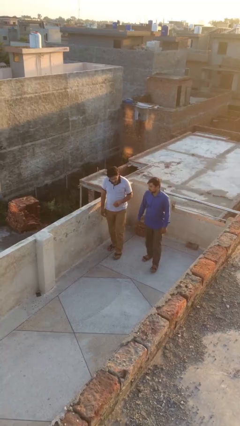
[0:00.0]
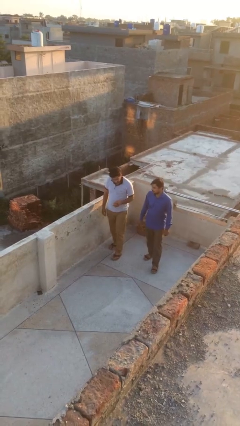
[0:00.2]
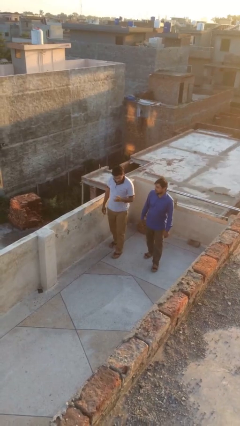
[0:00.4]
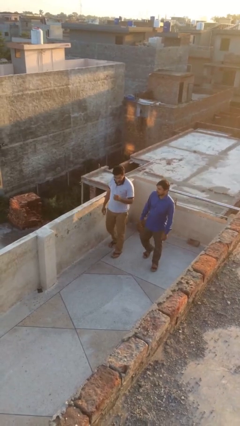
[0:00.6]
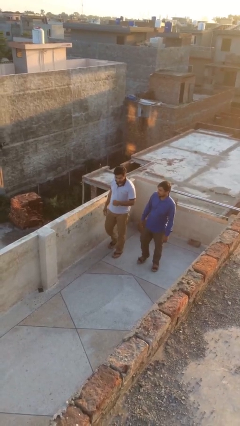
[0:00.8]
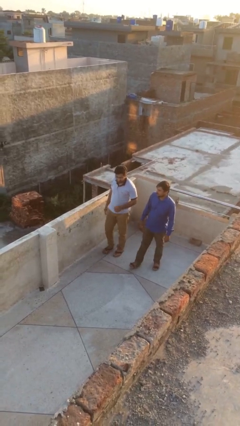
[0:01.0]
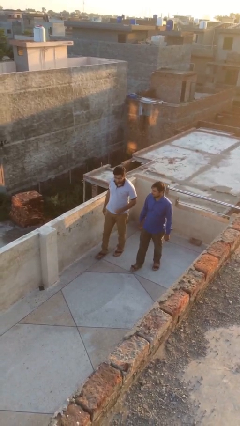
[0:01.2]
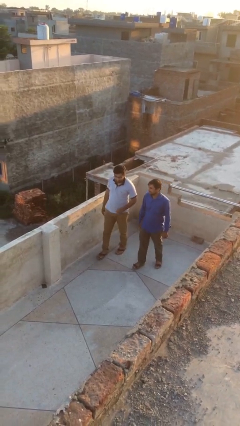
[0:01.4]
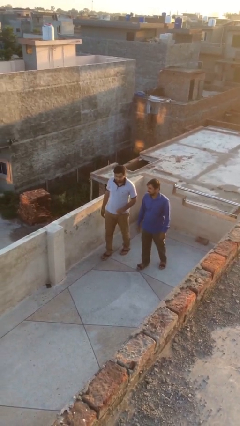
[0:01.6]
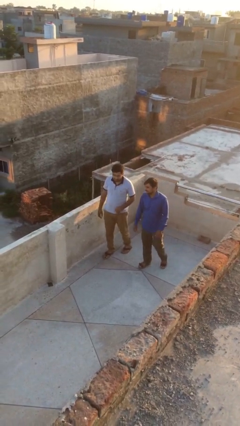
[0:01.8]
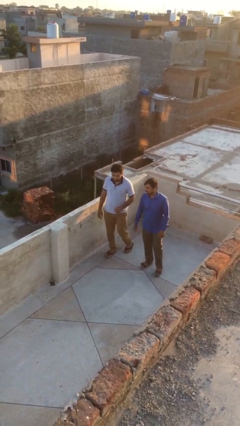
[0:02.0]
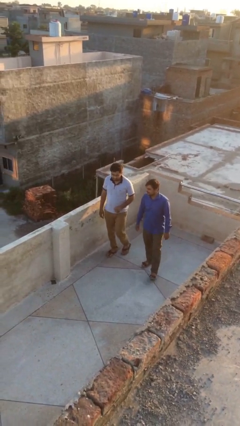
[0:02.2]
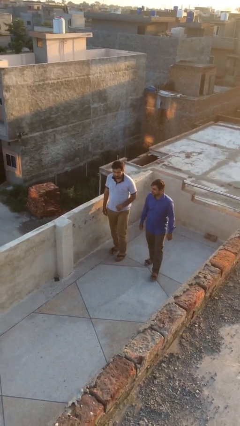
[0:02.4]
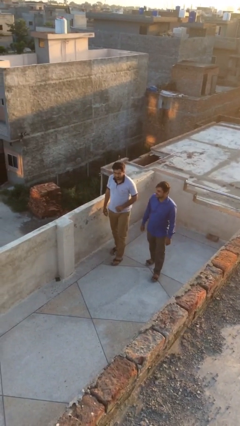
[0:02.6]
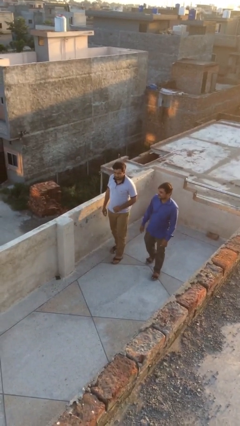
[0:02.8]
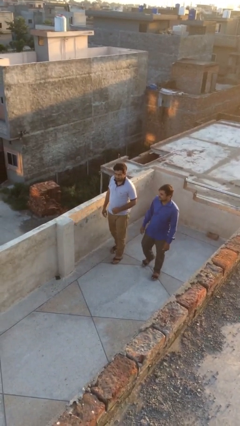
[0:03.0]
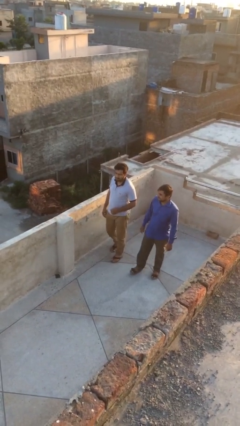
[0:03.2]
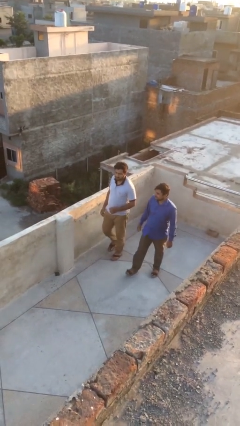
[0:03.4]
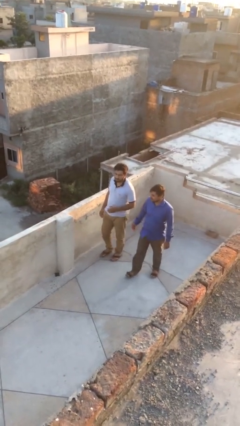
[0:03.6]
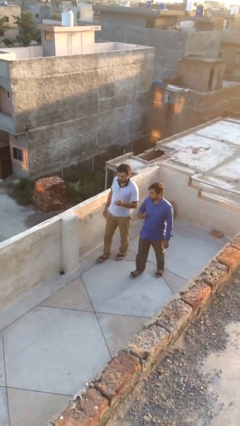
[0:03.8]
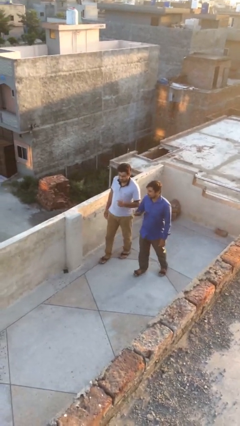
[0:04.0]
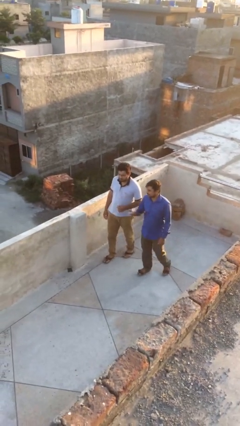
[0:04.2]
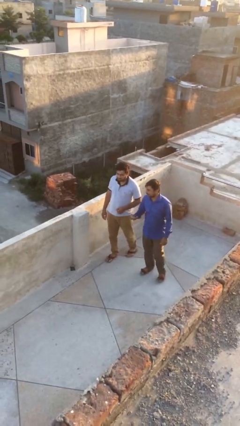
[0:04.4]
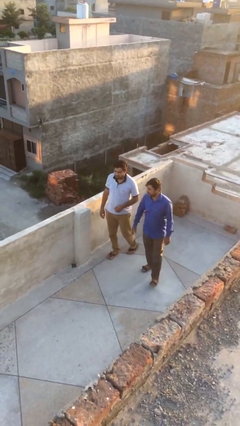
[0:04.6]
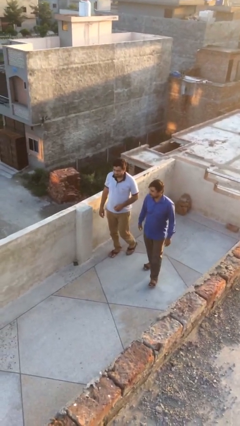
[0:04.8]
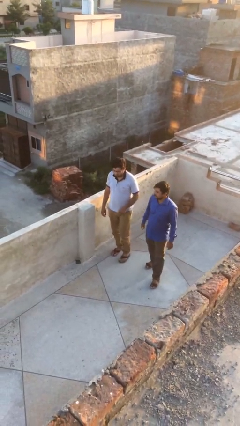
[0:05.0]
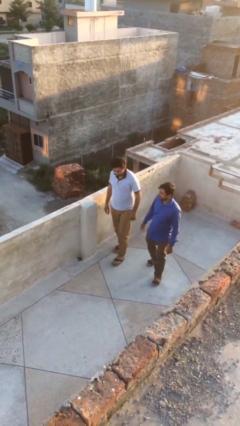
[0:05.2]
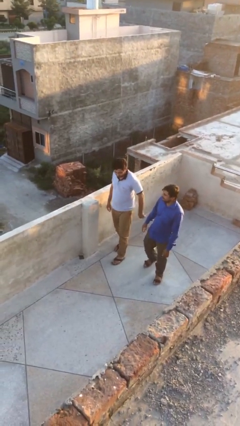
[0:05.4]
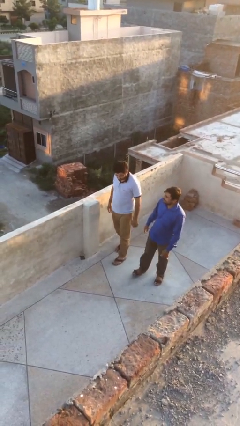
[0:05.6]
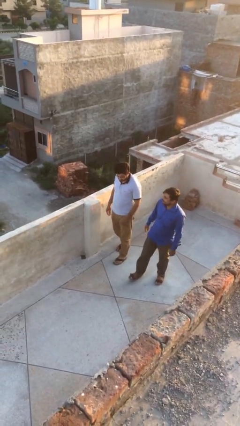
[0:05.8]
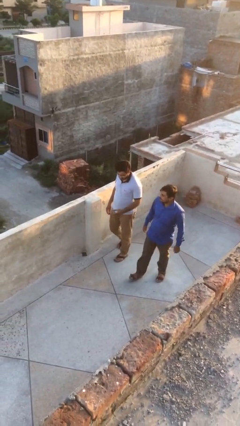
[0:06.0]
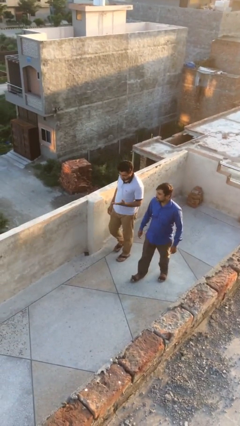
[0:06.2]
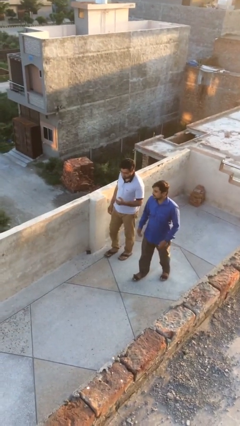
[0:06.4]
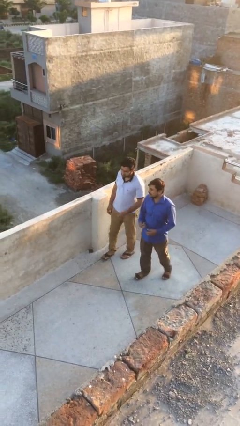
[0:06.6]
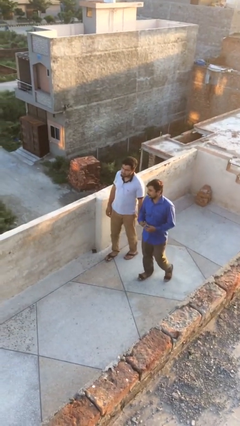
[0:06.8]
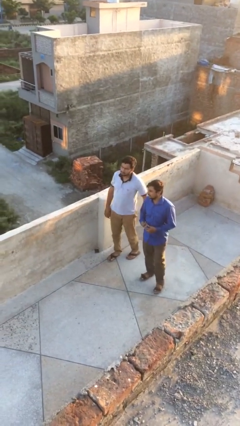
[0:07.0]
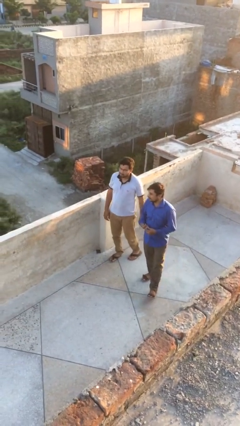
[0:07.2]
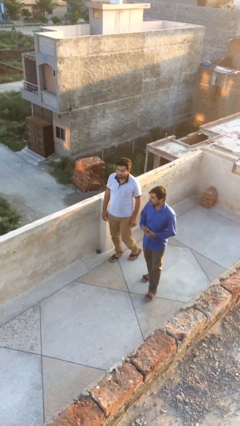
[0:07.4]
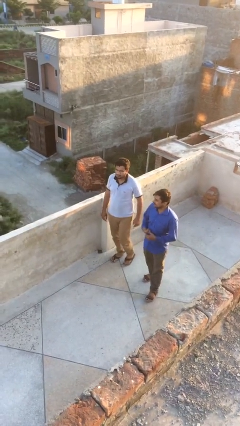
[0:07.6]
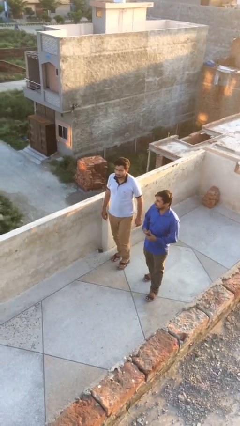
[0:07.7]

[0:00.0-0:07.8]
person talks to person

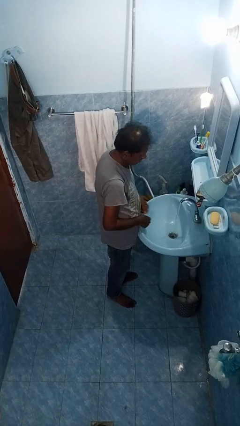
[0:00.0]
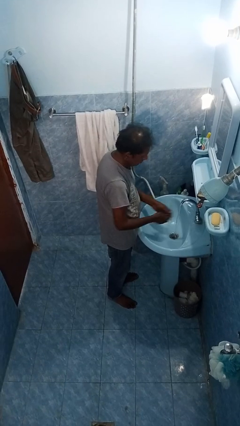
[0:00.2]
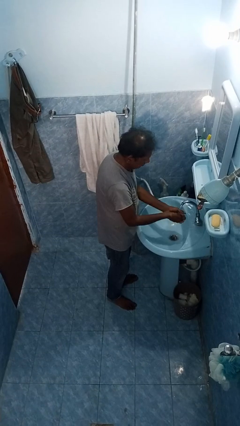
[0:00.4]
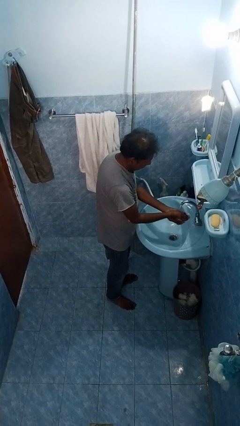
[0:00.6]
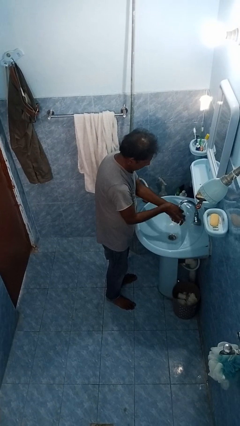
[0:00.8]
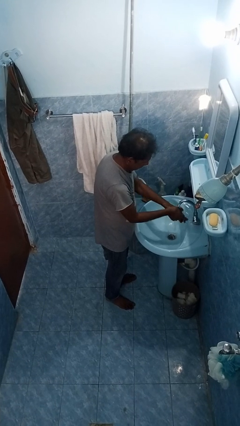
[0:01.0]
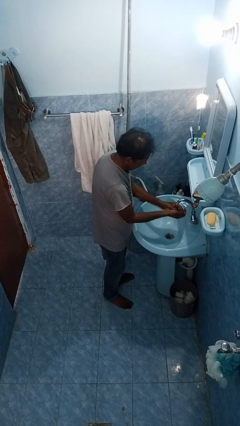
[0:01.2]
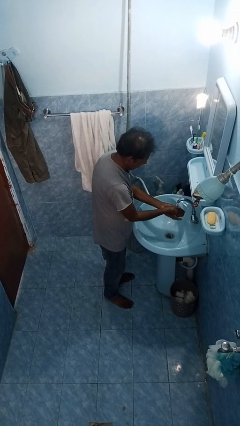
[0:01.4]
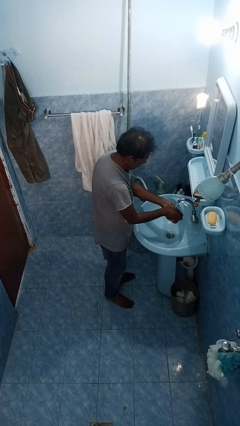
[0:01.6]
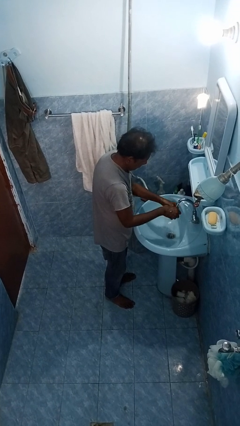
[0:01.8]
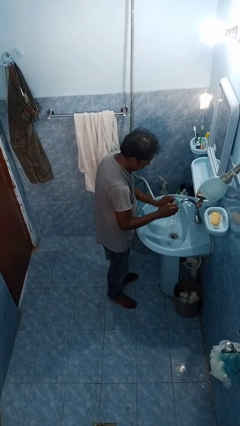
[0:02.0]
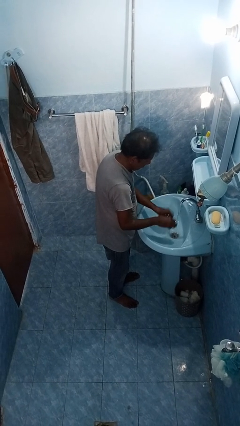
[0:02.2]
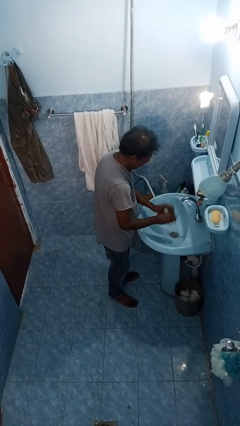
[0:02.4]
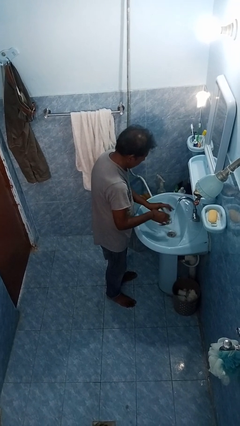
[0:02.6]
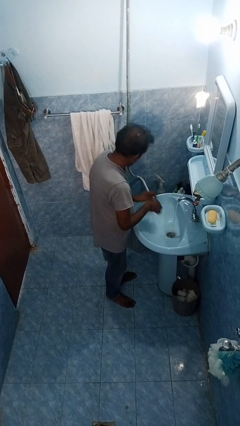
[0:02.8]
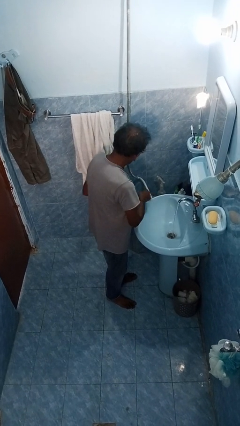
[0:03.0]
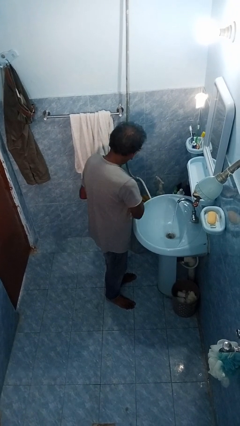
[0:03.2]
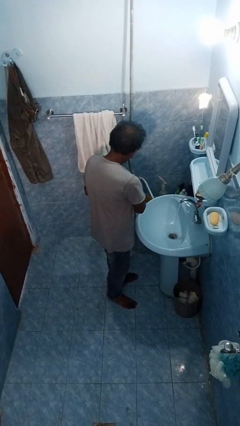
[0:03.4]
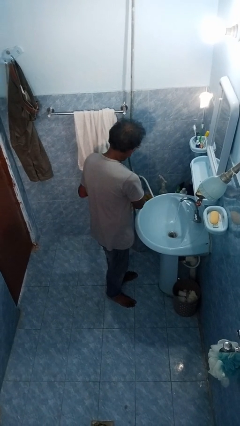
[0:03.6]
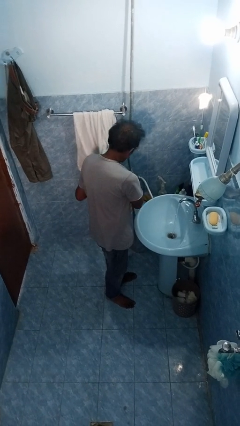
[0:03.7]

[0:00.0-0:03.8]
person washes hands

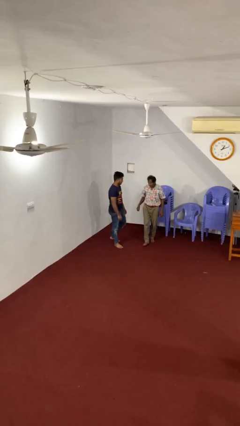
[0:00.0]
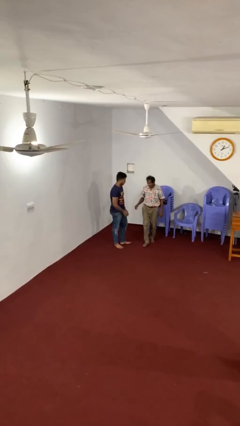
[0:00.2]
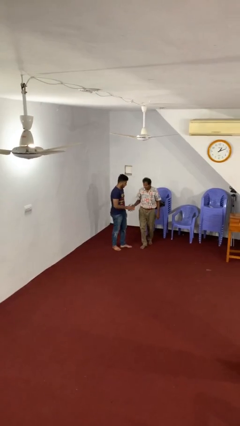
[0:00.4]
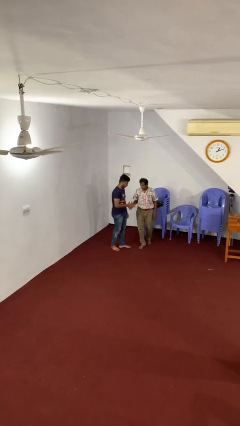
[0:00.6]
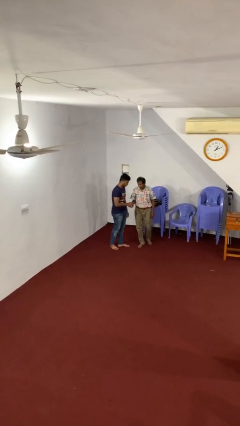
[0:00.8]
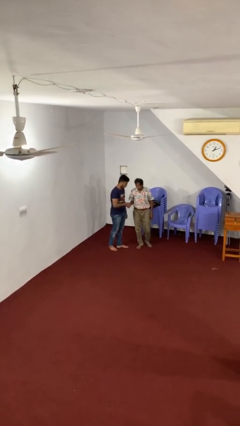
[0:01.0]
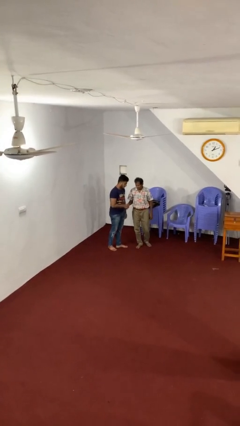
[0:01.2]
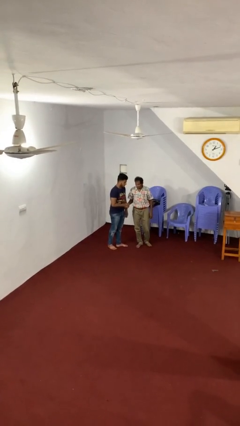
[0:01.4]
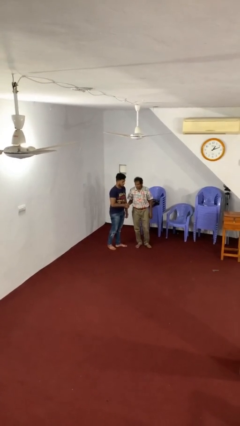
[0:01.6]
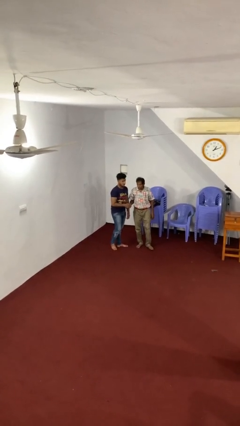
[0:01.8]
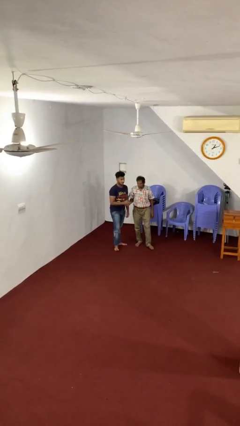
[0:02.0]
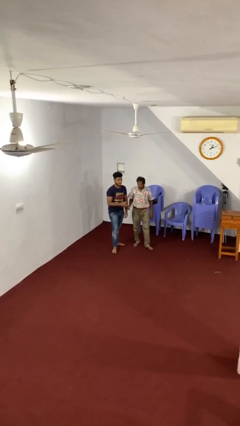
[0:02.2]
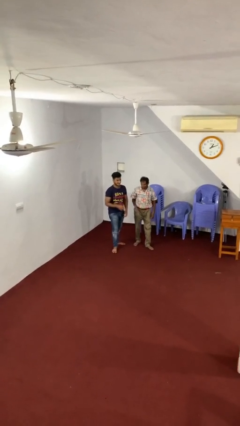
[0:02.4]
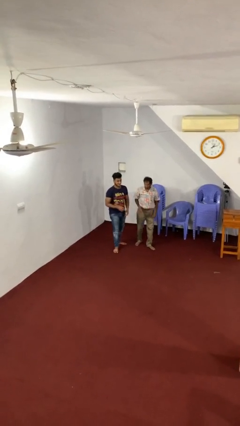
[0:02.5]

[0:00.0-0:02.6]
person shakes hand

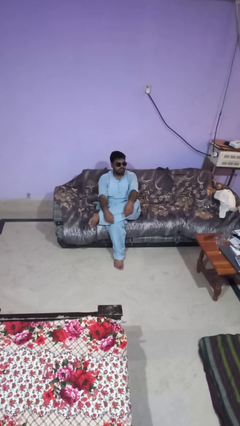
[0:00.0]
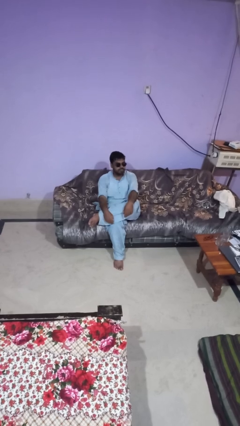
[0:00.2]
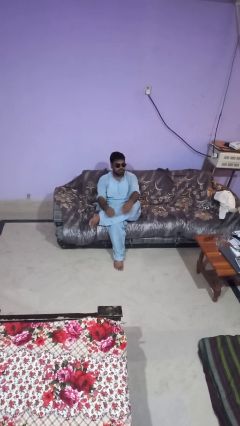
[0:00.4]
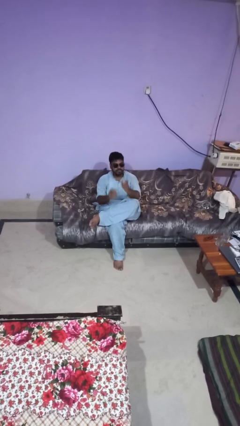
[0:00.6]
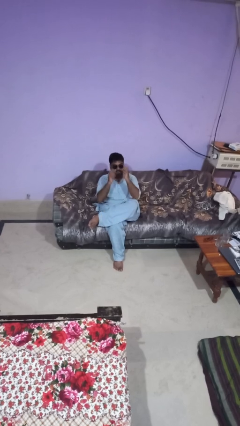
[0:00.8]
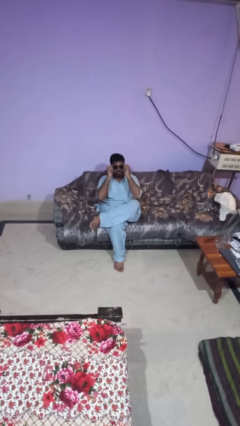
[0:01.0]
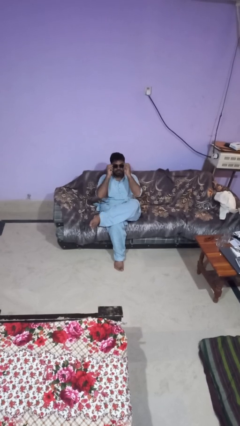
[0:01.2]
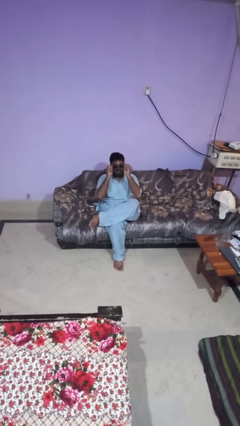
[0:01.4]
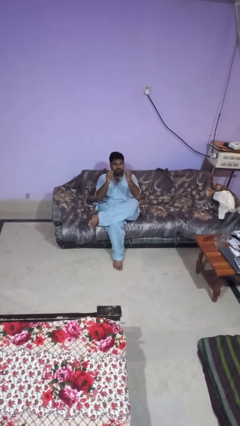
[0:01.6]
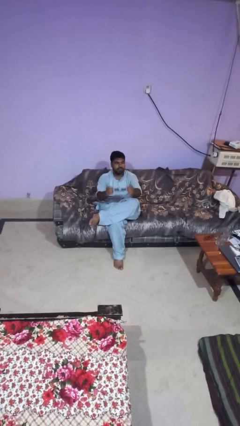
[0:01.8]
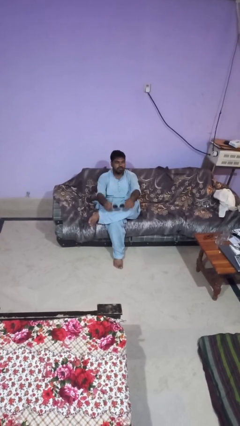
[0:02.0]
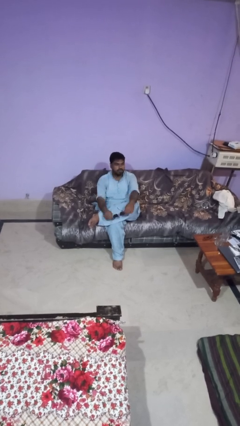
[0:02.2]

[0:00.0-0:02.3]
person takes off sunglasses

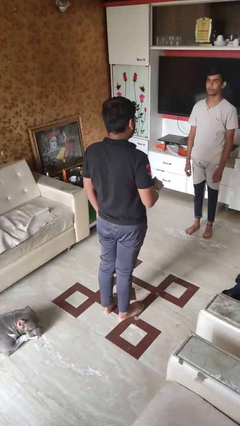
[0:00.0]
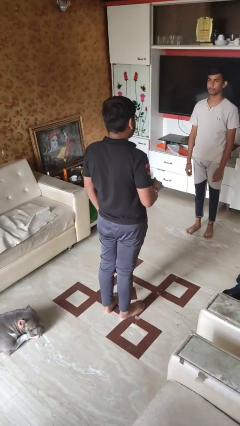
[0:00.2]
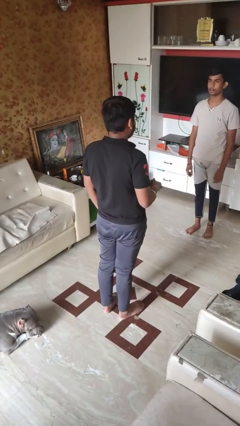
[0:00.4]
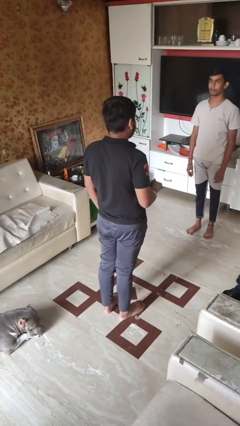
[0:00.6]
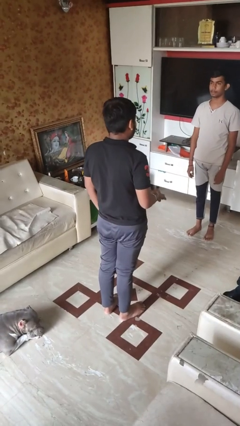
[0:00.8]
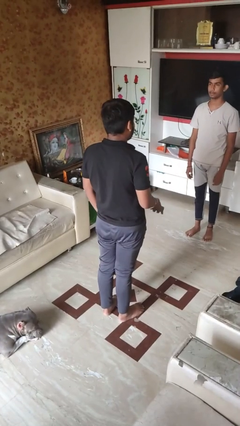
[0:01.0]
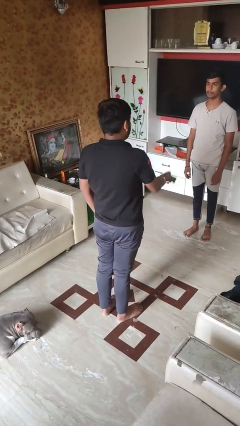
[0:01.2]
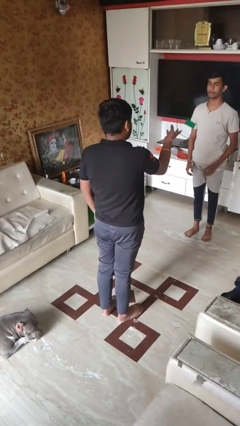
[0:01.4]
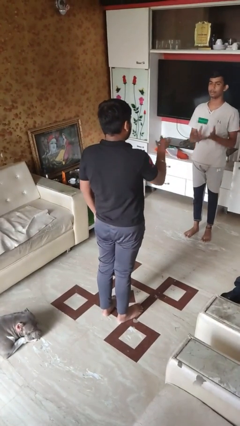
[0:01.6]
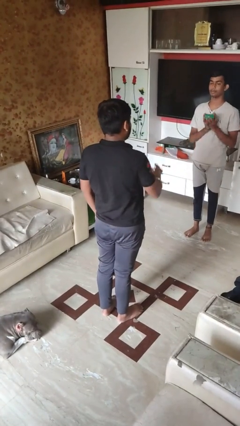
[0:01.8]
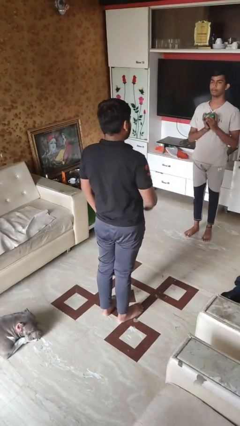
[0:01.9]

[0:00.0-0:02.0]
person throws object to person
